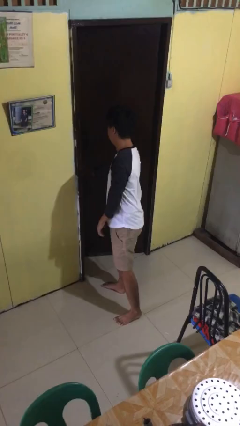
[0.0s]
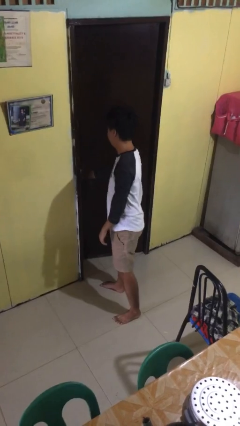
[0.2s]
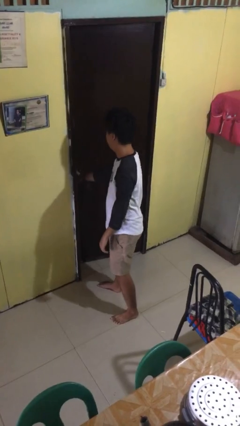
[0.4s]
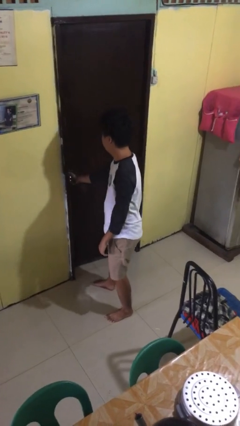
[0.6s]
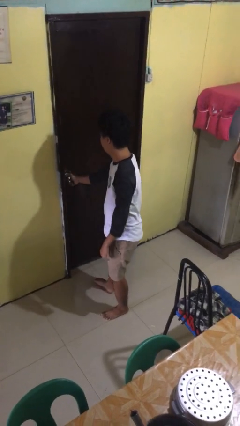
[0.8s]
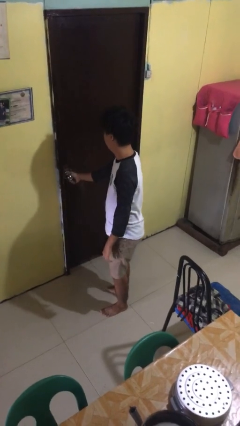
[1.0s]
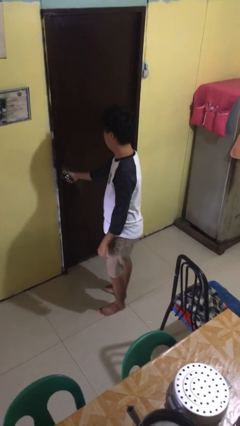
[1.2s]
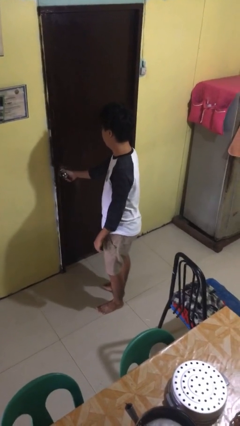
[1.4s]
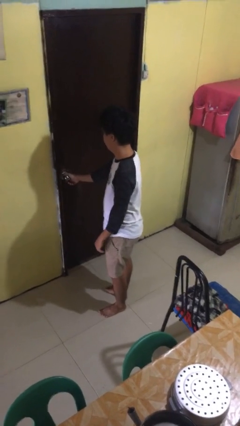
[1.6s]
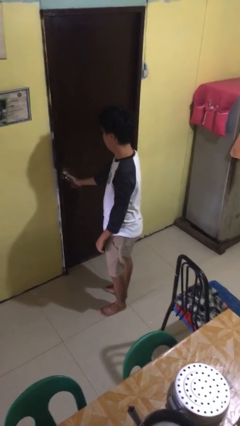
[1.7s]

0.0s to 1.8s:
person closes facility door

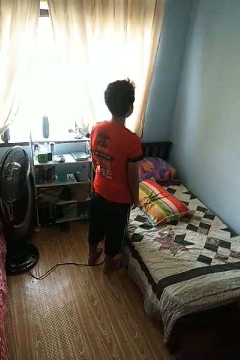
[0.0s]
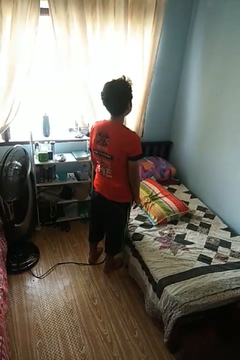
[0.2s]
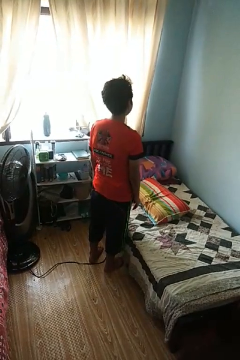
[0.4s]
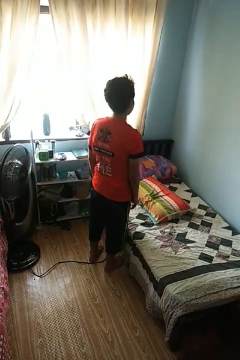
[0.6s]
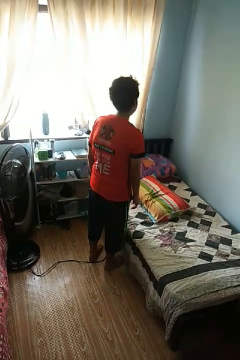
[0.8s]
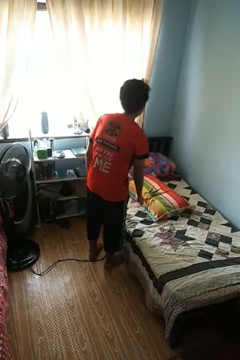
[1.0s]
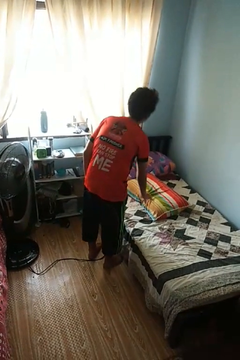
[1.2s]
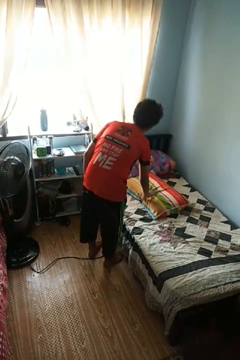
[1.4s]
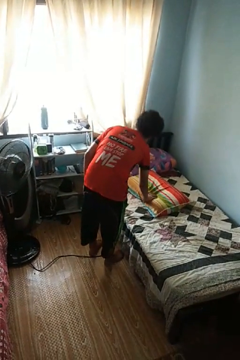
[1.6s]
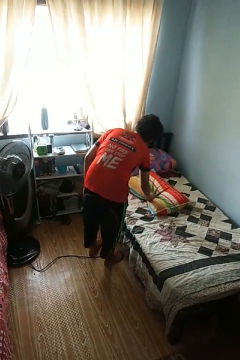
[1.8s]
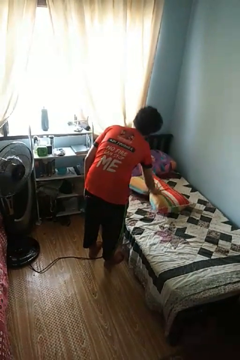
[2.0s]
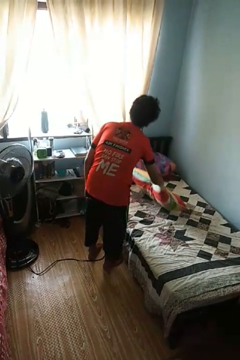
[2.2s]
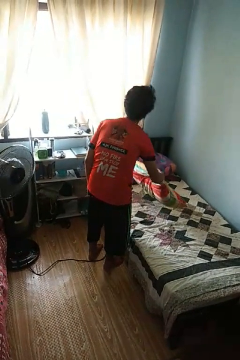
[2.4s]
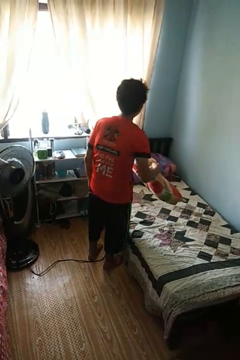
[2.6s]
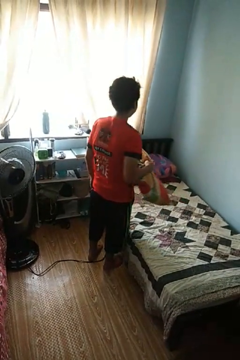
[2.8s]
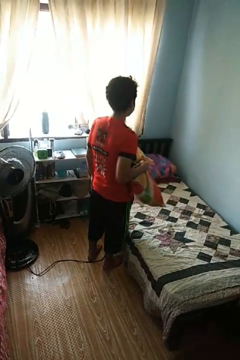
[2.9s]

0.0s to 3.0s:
person picks up object from bed

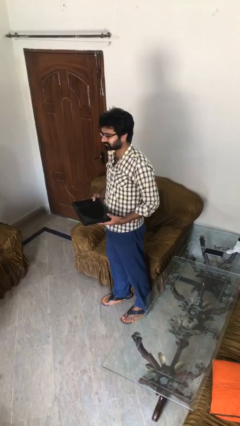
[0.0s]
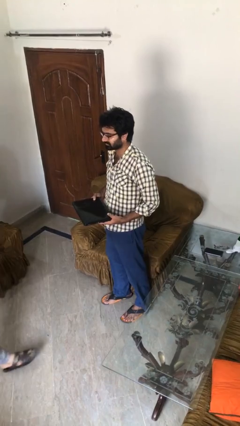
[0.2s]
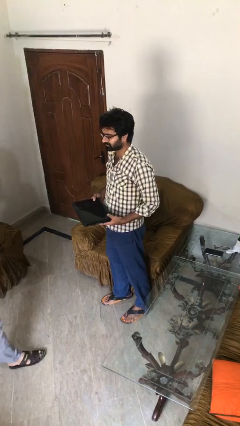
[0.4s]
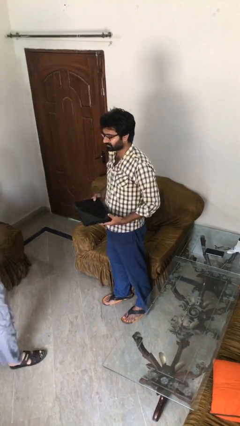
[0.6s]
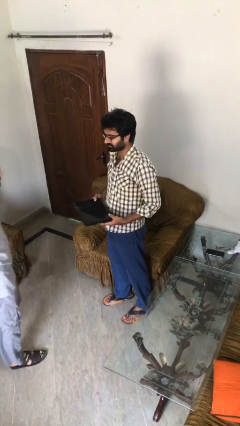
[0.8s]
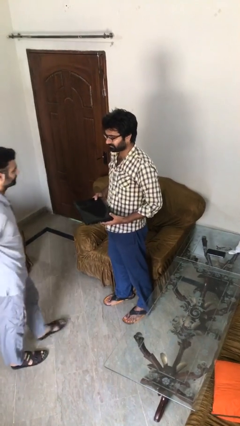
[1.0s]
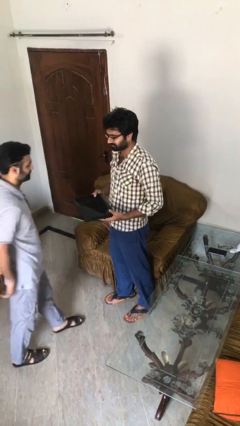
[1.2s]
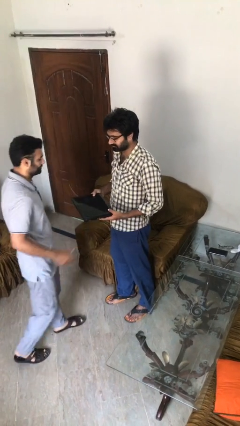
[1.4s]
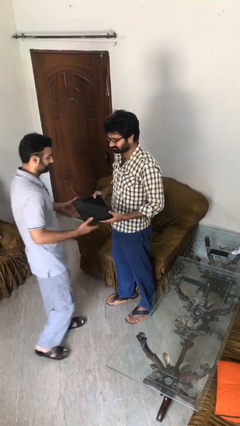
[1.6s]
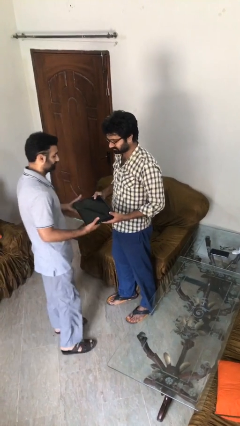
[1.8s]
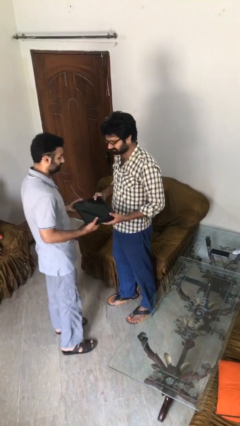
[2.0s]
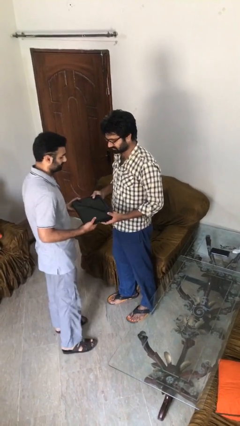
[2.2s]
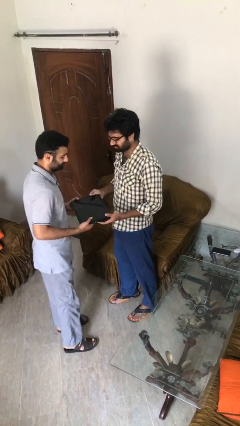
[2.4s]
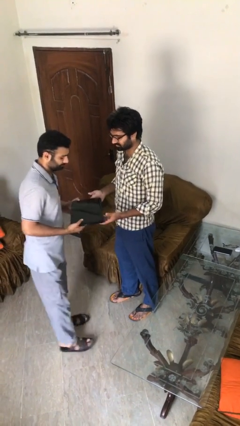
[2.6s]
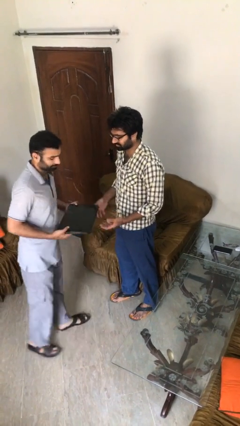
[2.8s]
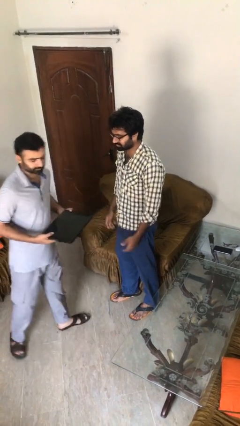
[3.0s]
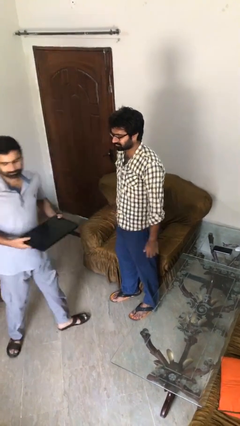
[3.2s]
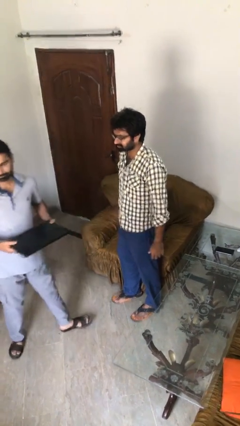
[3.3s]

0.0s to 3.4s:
person transfers object to person

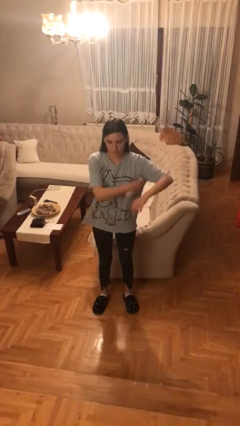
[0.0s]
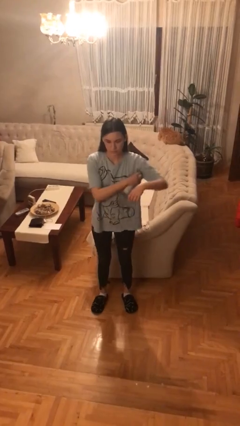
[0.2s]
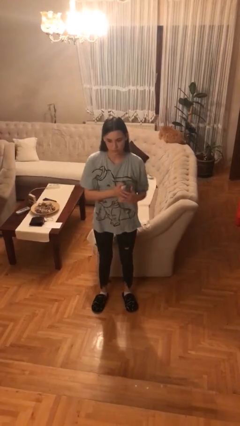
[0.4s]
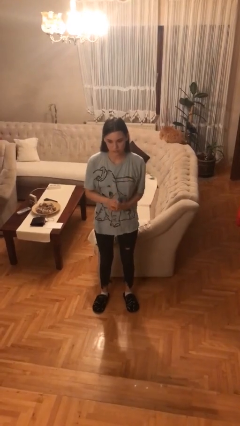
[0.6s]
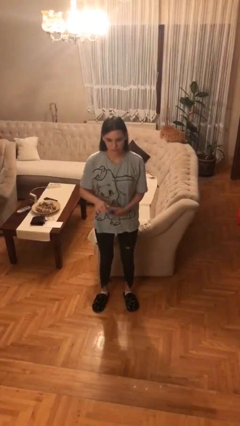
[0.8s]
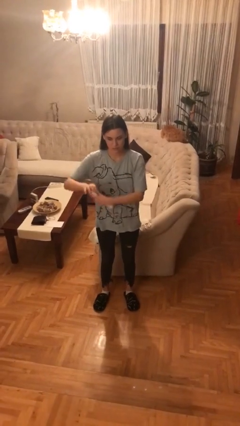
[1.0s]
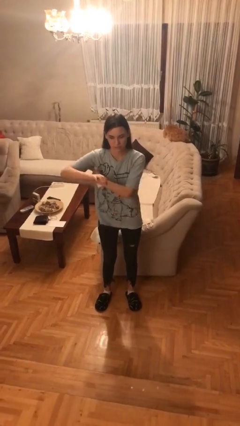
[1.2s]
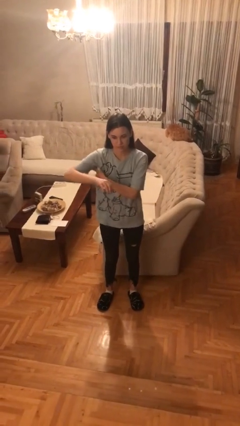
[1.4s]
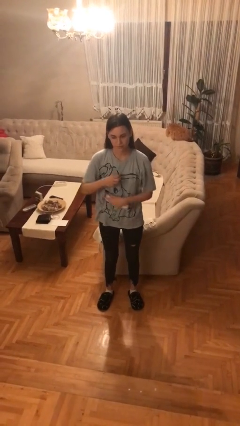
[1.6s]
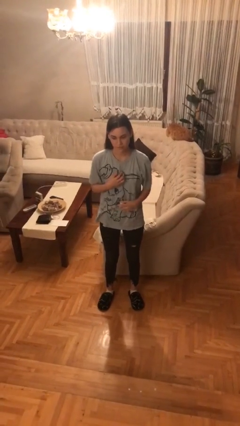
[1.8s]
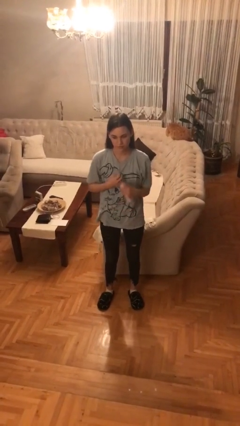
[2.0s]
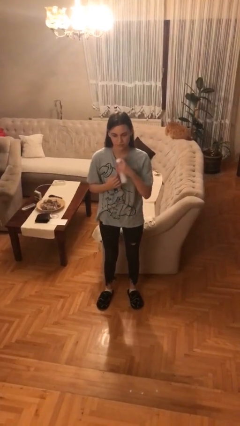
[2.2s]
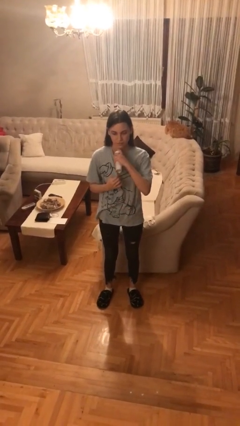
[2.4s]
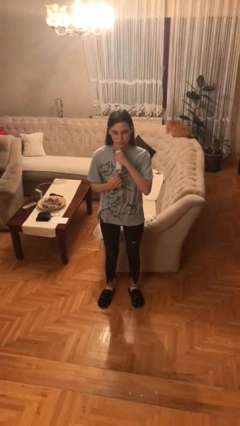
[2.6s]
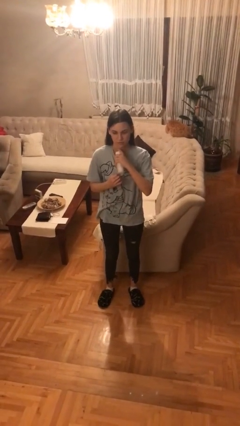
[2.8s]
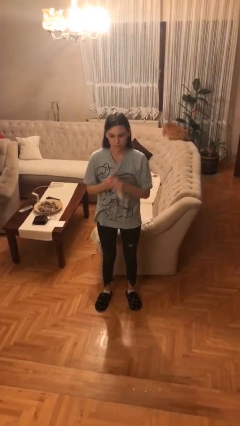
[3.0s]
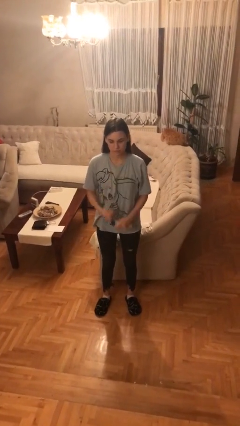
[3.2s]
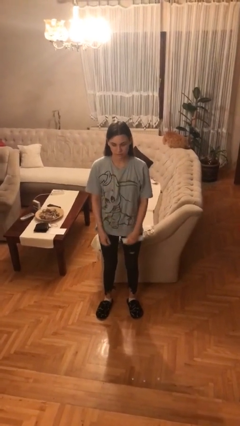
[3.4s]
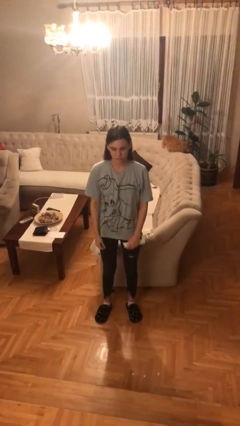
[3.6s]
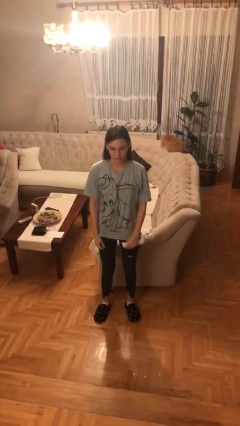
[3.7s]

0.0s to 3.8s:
person applies deodorant

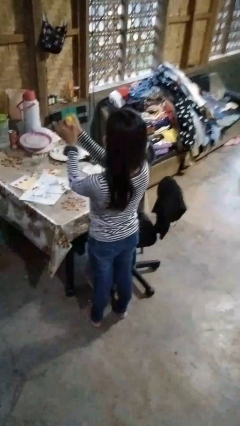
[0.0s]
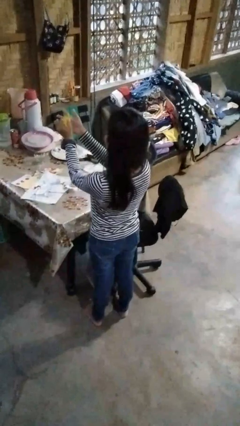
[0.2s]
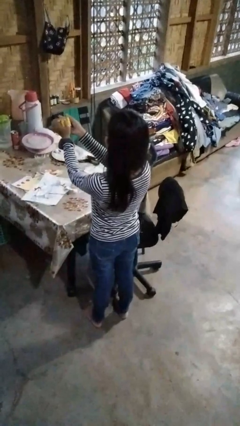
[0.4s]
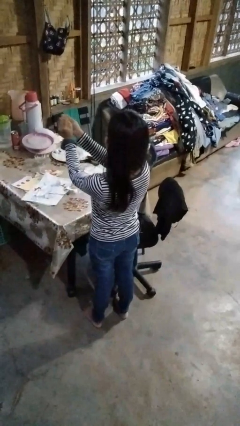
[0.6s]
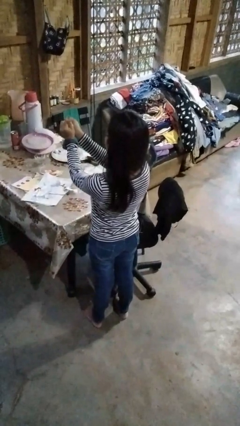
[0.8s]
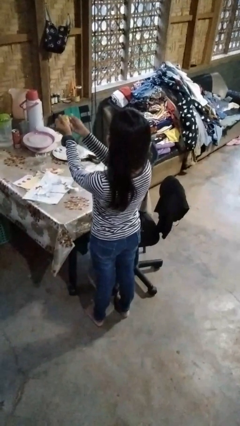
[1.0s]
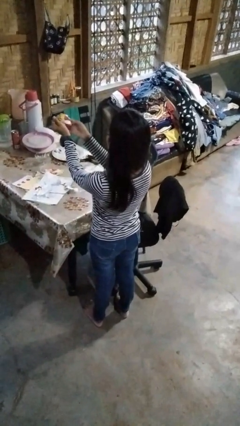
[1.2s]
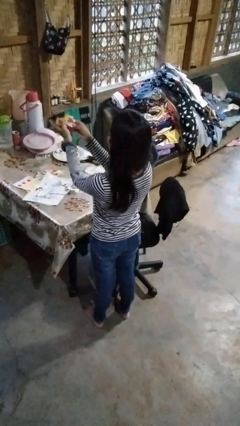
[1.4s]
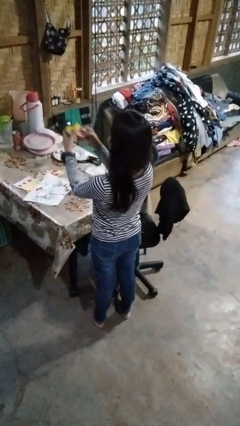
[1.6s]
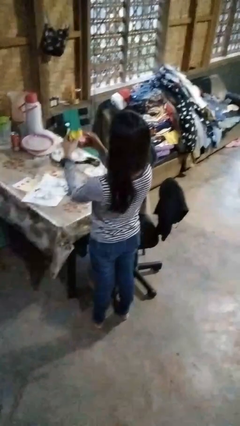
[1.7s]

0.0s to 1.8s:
person crumples paper

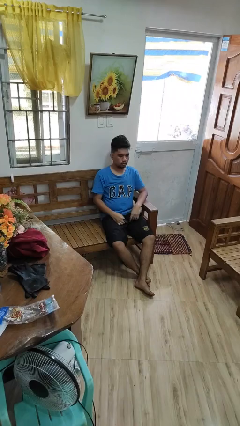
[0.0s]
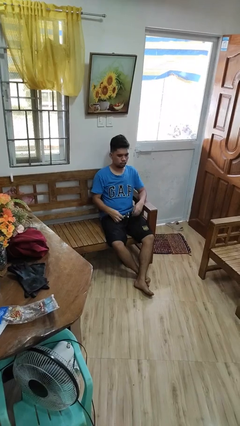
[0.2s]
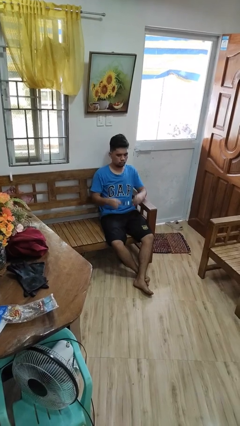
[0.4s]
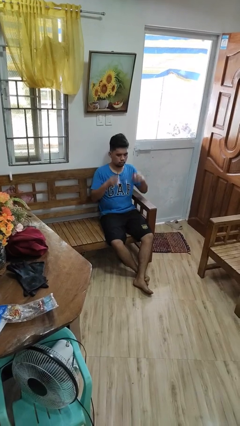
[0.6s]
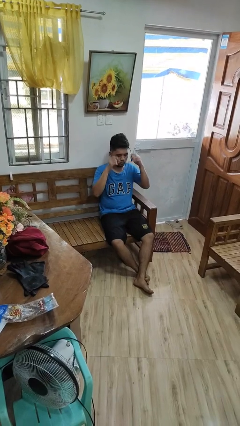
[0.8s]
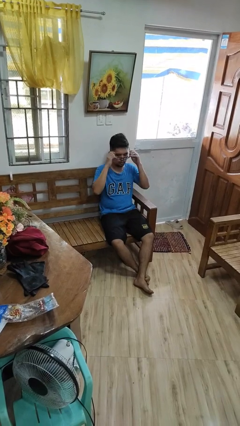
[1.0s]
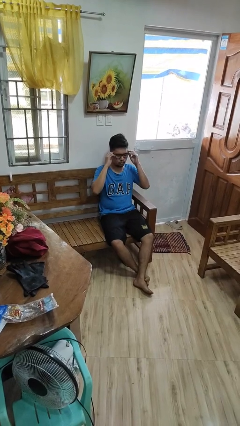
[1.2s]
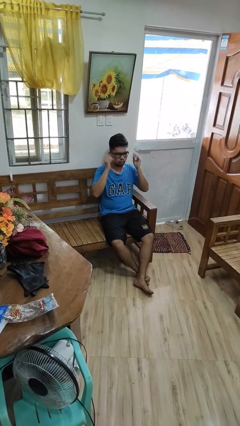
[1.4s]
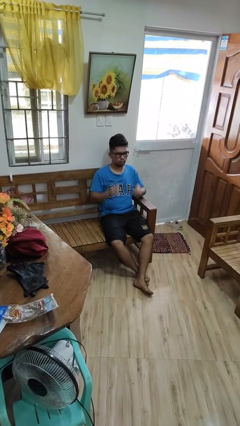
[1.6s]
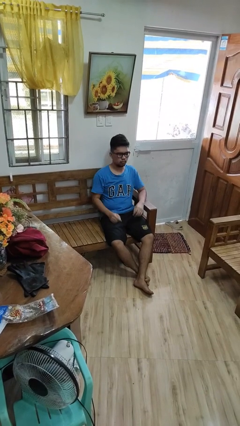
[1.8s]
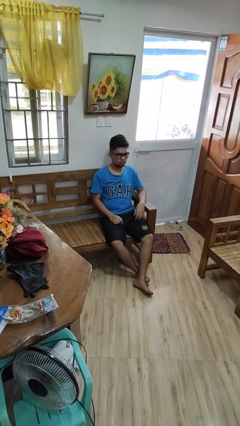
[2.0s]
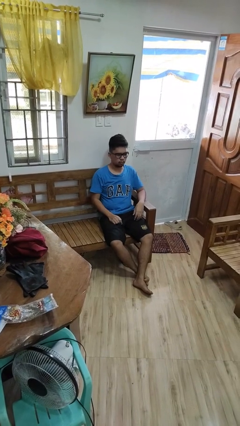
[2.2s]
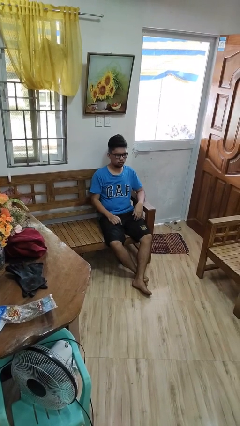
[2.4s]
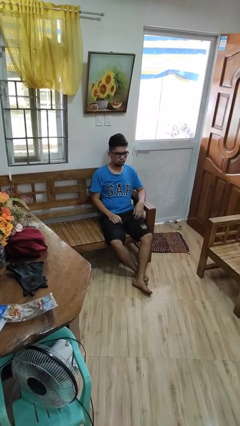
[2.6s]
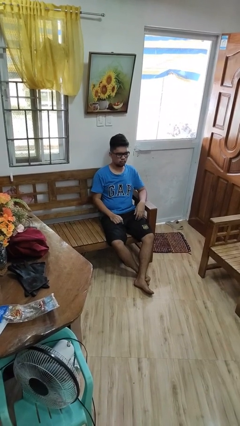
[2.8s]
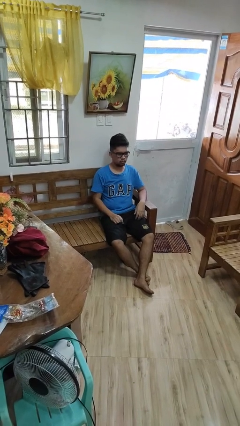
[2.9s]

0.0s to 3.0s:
person puts on glasses

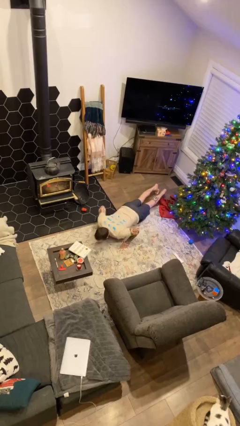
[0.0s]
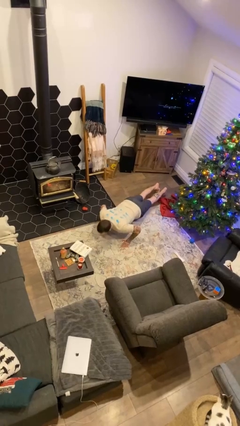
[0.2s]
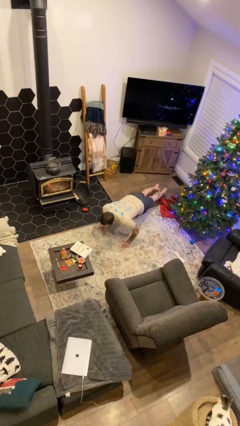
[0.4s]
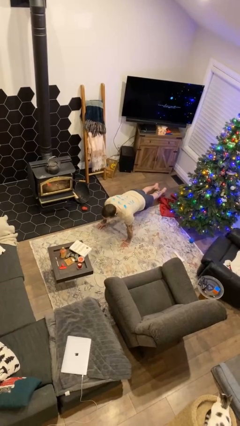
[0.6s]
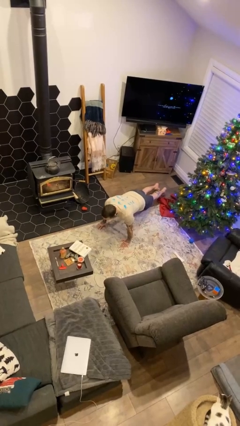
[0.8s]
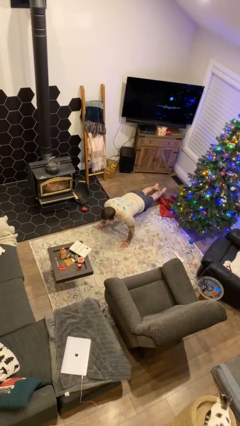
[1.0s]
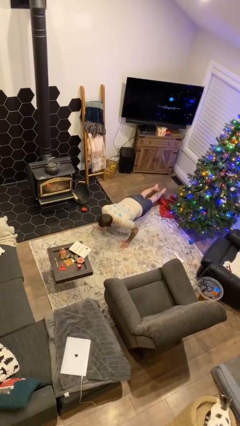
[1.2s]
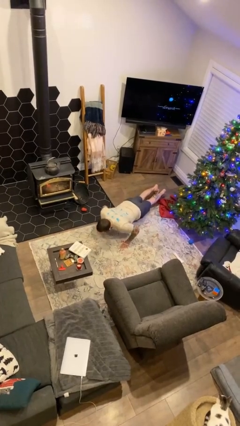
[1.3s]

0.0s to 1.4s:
person exercises with pushup
